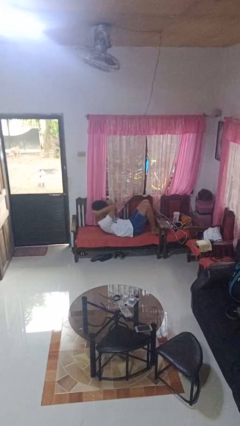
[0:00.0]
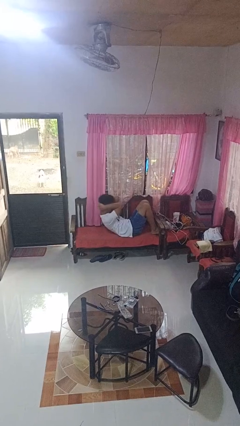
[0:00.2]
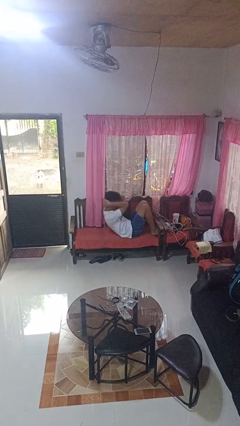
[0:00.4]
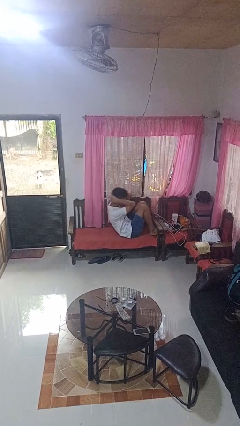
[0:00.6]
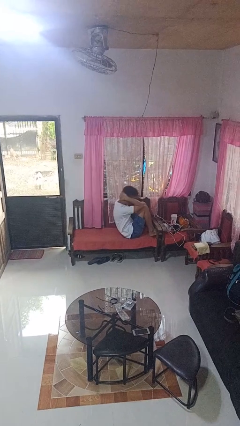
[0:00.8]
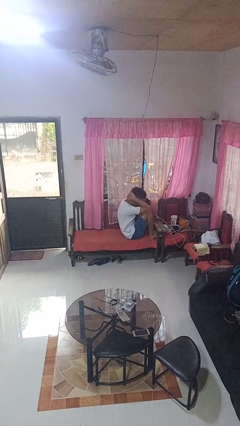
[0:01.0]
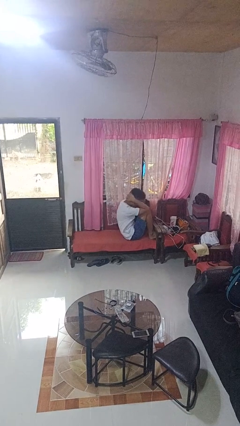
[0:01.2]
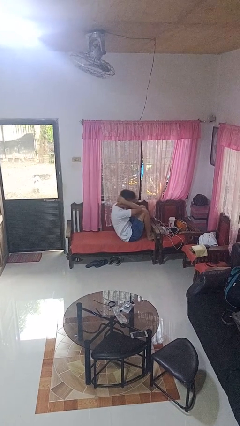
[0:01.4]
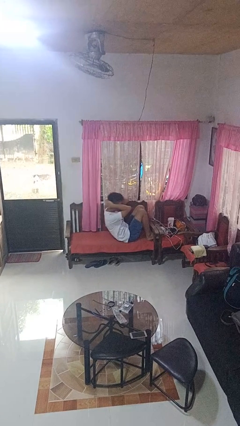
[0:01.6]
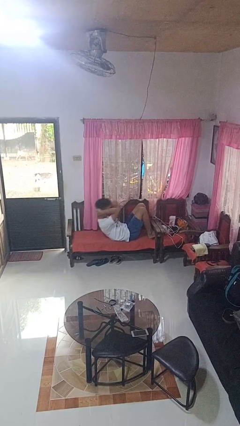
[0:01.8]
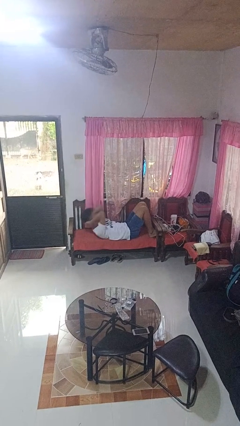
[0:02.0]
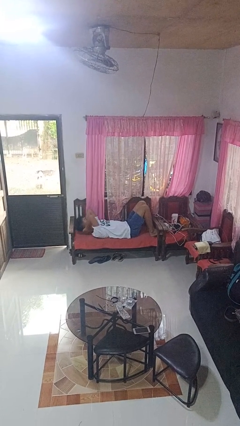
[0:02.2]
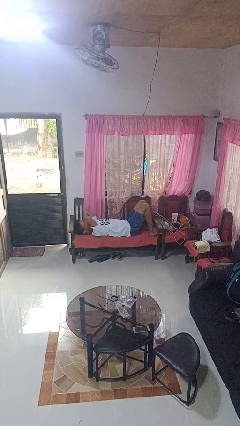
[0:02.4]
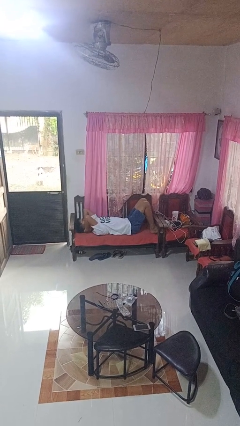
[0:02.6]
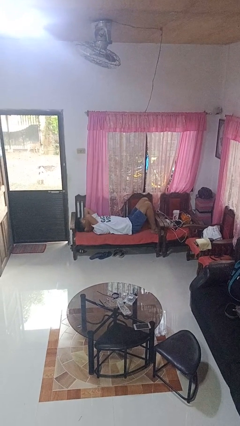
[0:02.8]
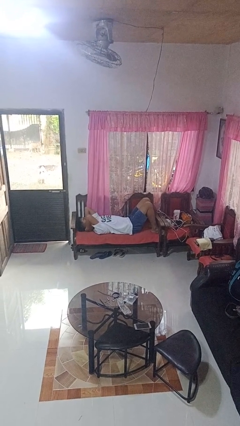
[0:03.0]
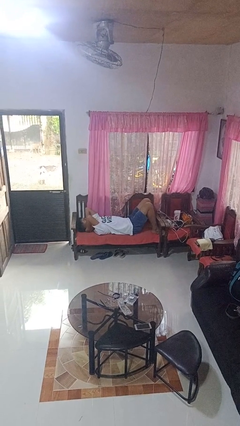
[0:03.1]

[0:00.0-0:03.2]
person exercises with situp

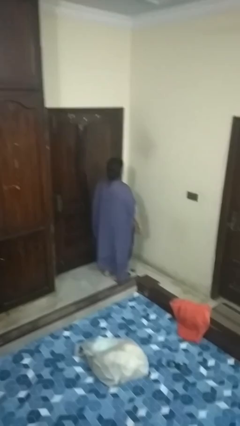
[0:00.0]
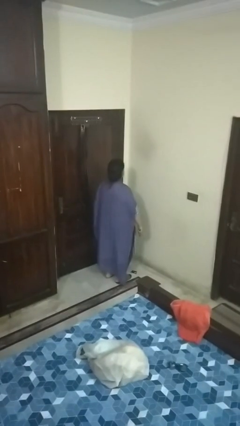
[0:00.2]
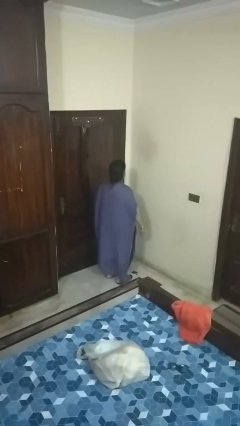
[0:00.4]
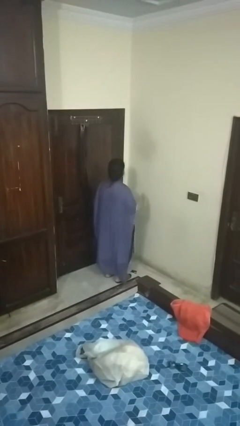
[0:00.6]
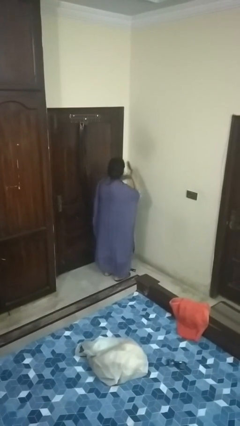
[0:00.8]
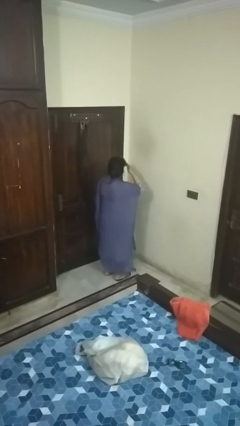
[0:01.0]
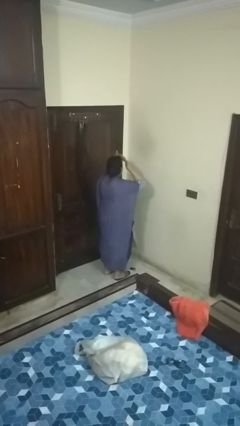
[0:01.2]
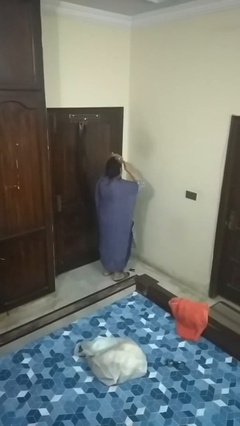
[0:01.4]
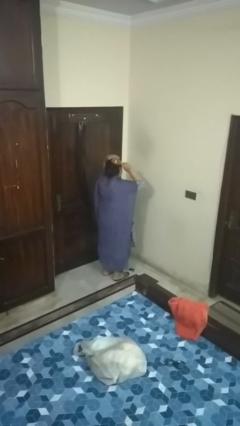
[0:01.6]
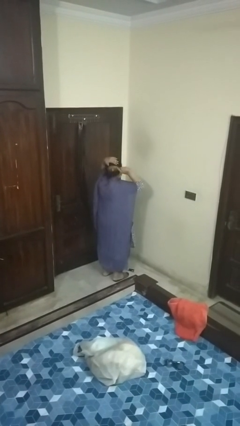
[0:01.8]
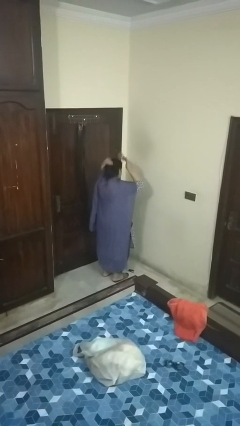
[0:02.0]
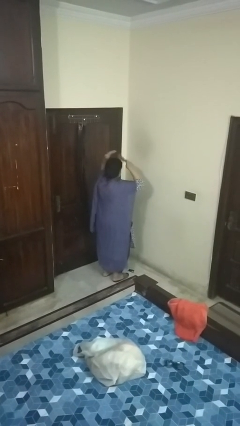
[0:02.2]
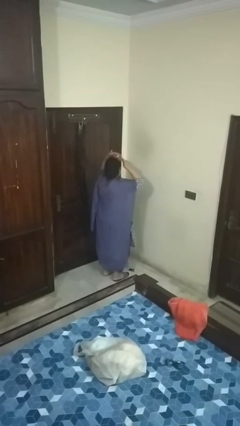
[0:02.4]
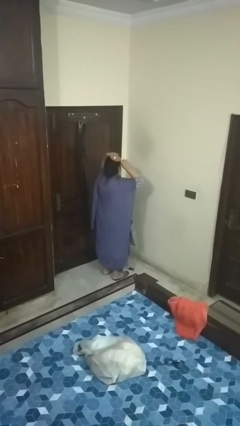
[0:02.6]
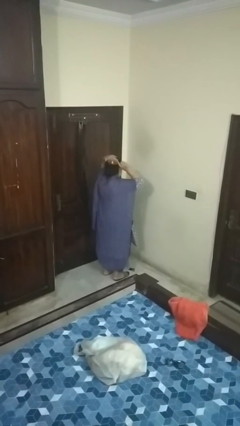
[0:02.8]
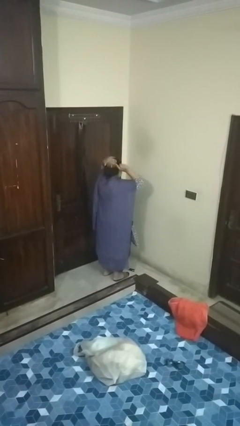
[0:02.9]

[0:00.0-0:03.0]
person brushes hair

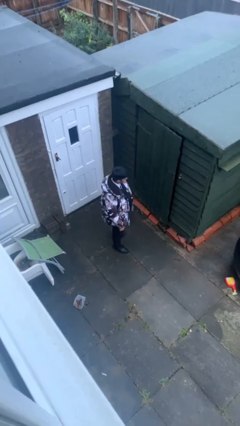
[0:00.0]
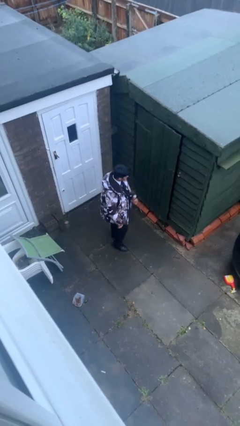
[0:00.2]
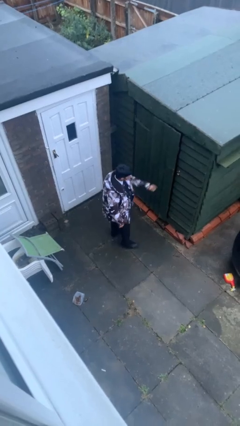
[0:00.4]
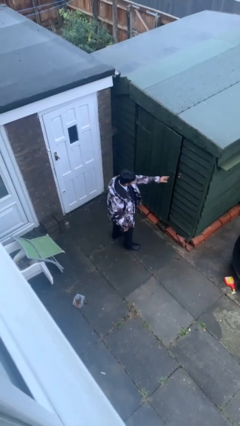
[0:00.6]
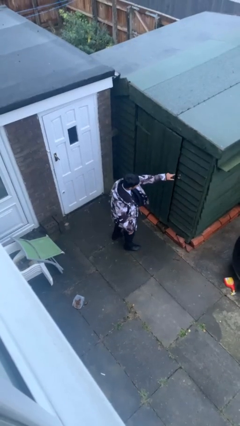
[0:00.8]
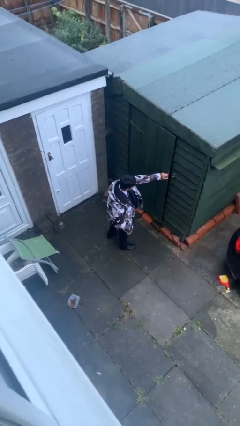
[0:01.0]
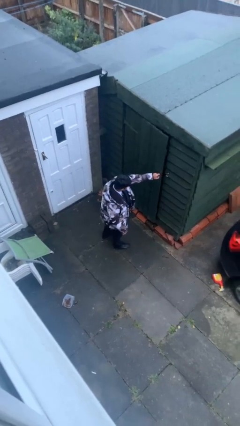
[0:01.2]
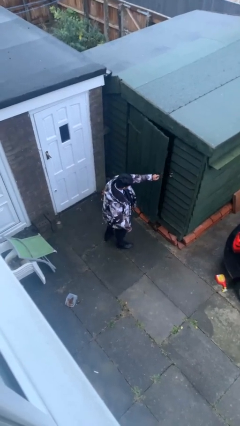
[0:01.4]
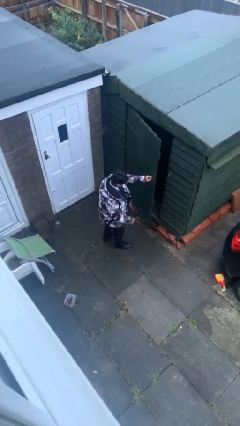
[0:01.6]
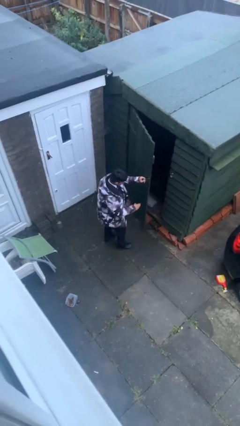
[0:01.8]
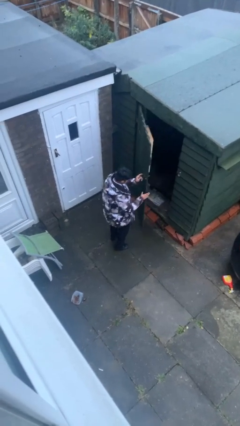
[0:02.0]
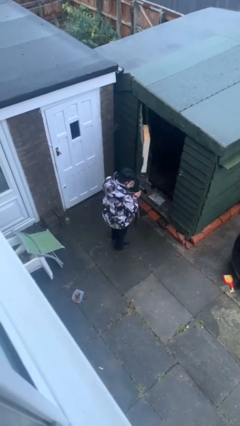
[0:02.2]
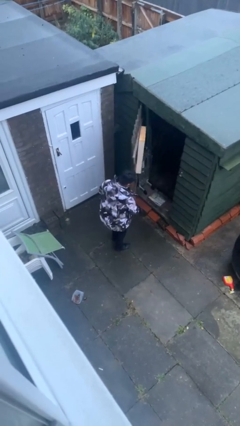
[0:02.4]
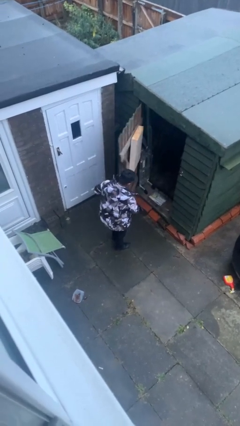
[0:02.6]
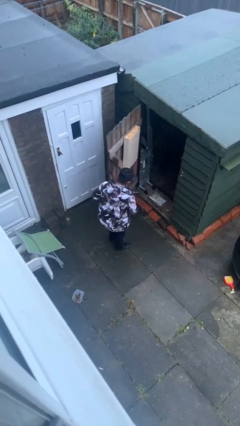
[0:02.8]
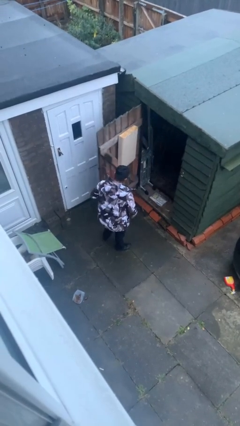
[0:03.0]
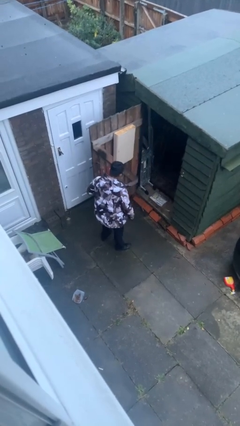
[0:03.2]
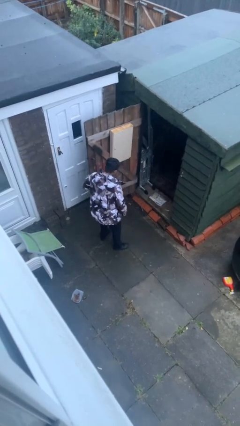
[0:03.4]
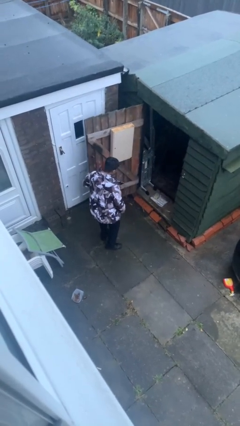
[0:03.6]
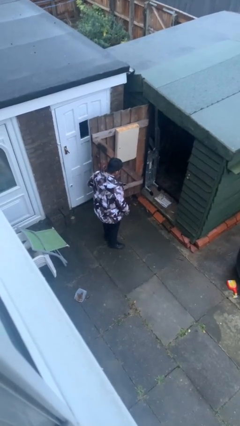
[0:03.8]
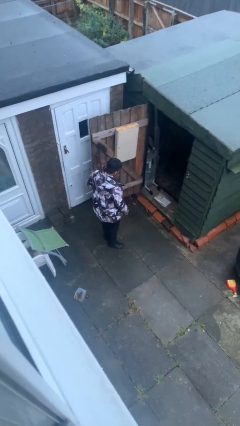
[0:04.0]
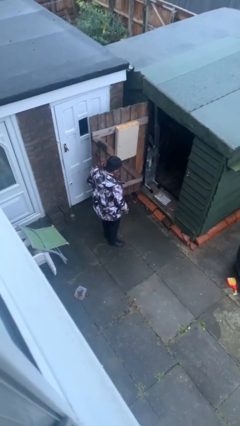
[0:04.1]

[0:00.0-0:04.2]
person opens facility door

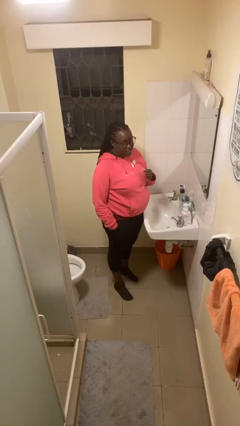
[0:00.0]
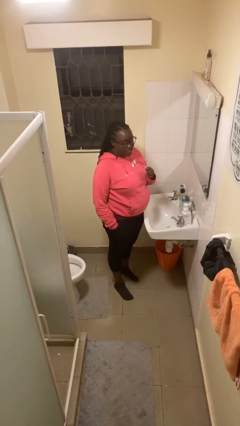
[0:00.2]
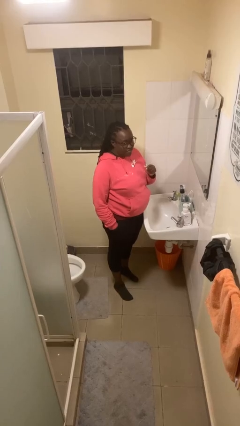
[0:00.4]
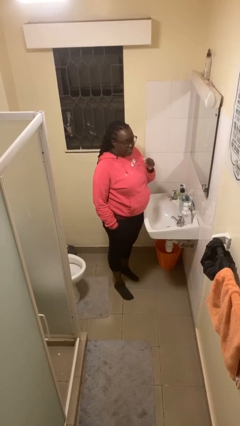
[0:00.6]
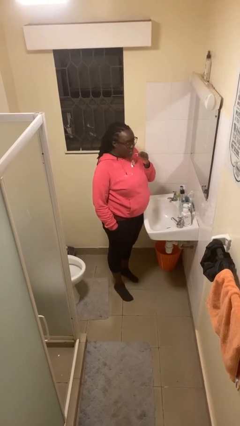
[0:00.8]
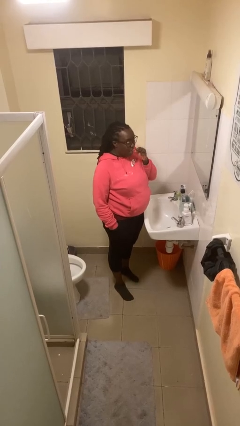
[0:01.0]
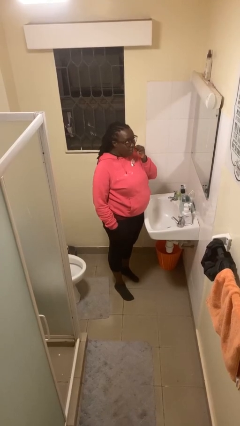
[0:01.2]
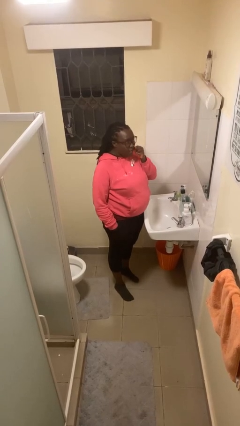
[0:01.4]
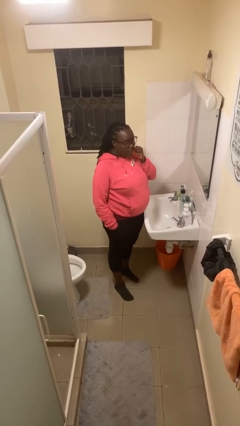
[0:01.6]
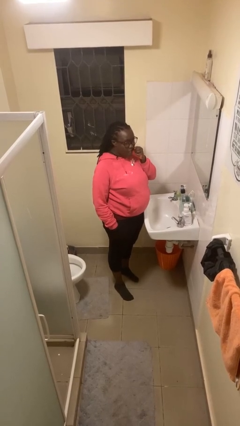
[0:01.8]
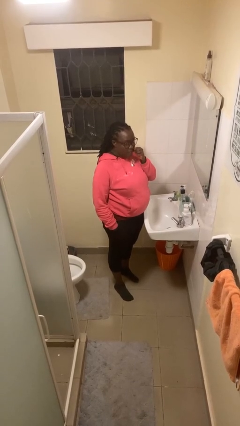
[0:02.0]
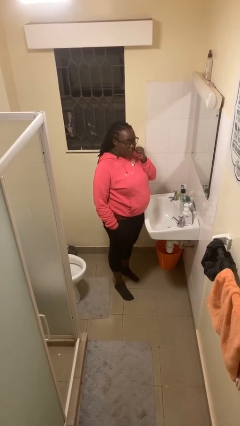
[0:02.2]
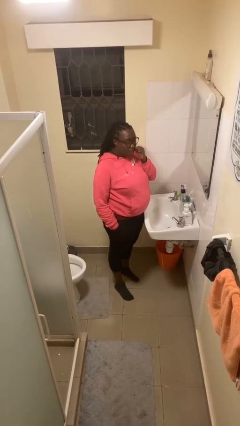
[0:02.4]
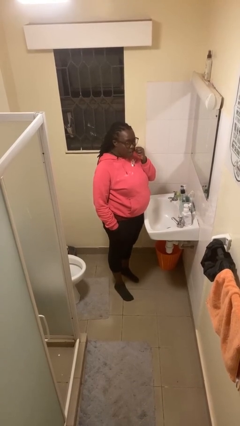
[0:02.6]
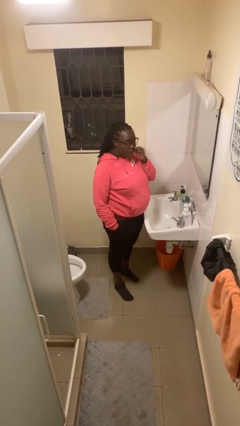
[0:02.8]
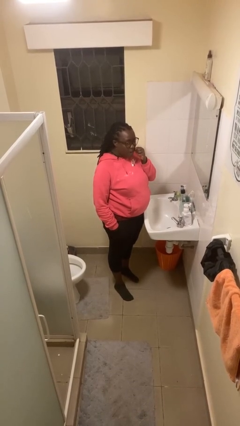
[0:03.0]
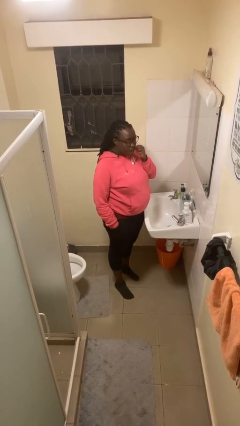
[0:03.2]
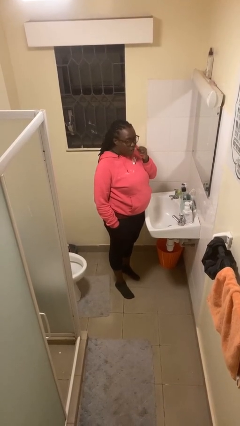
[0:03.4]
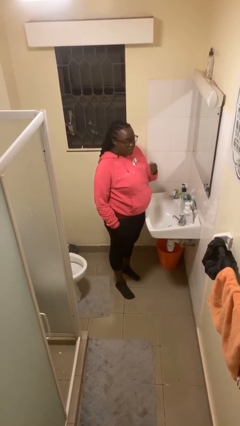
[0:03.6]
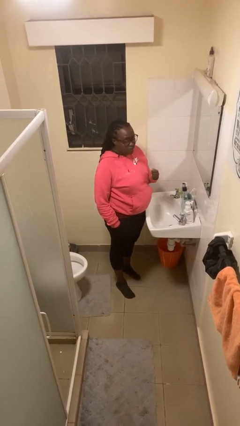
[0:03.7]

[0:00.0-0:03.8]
person flosses

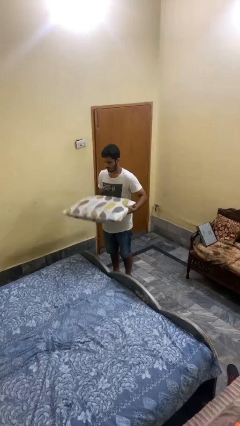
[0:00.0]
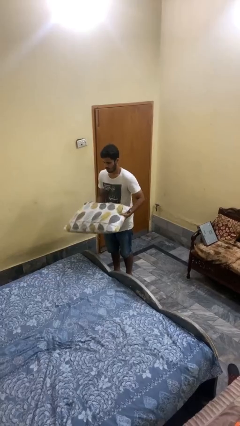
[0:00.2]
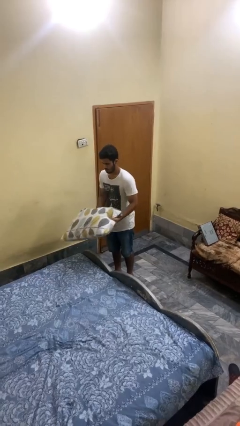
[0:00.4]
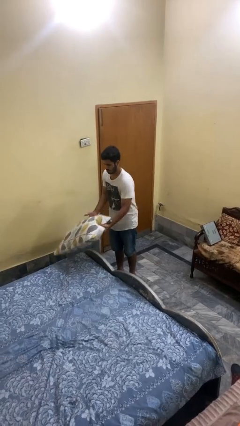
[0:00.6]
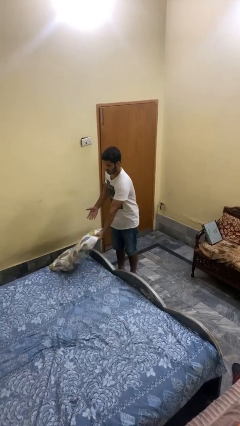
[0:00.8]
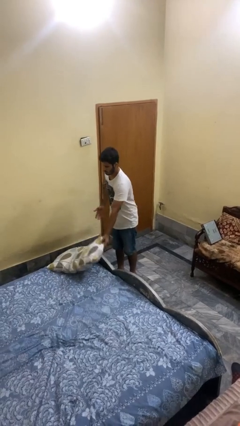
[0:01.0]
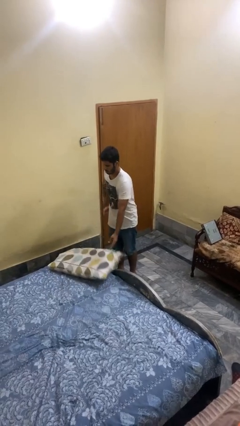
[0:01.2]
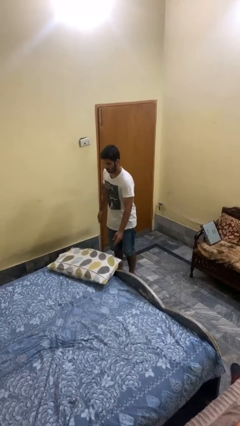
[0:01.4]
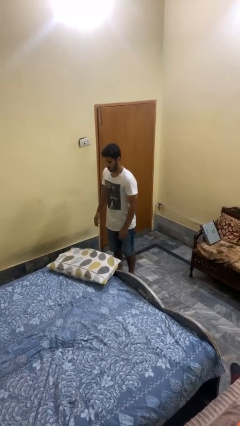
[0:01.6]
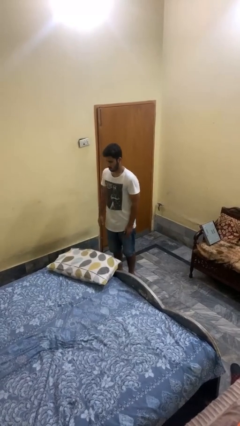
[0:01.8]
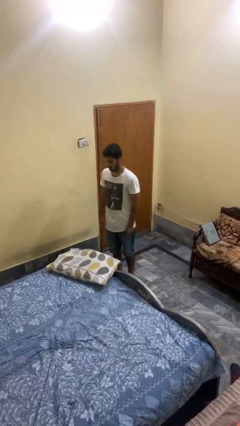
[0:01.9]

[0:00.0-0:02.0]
person puts down object on bed
